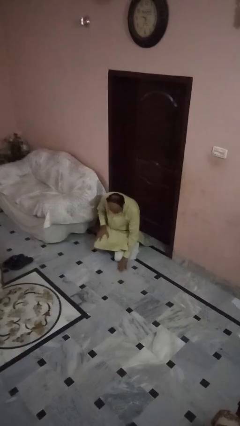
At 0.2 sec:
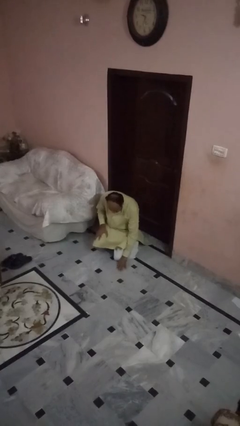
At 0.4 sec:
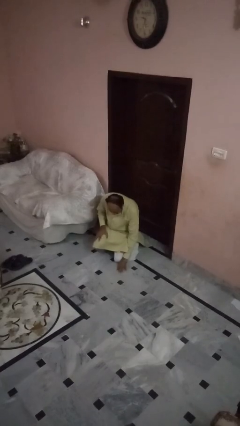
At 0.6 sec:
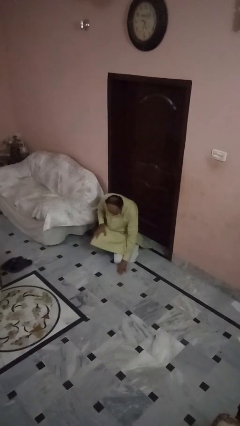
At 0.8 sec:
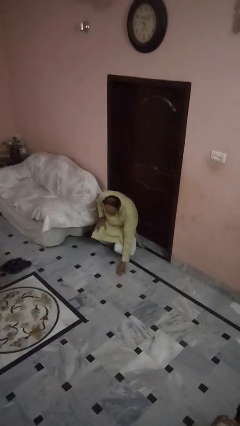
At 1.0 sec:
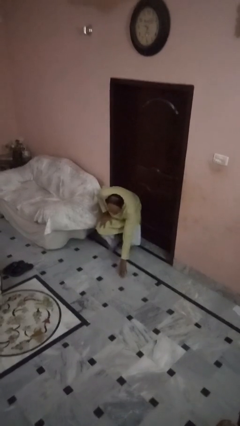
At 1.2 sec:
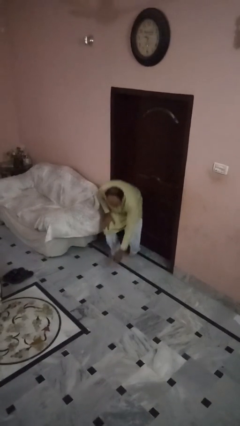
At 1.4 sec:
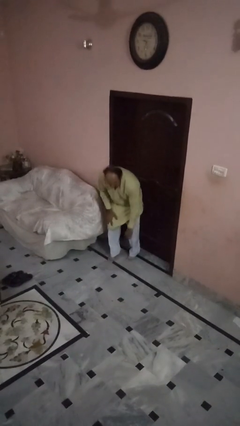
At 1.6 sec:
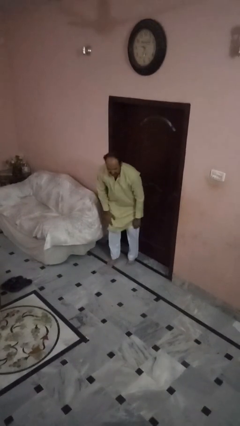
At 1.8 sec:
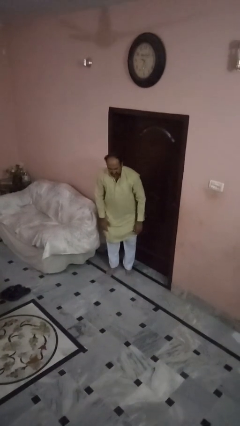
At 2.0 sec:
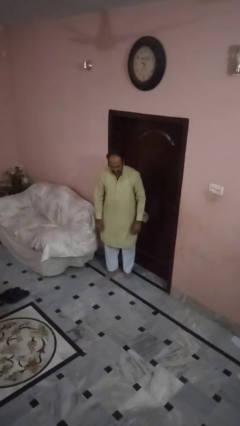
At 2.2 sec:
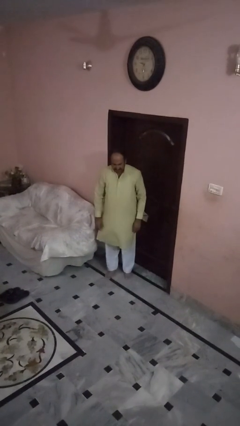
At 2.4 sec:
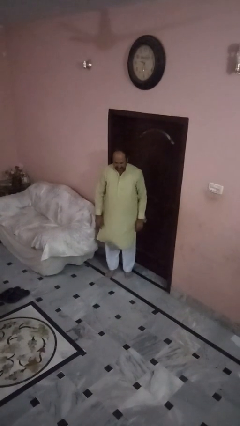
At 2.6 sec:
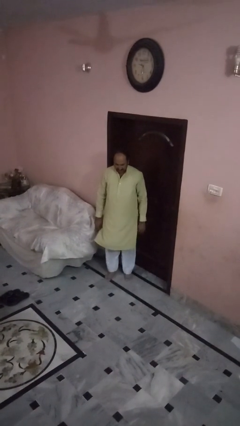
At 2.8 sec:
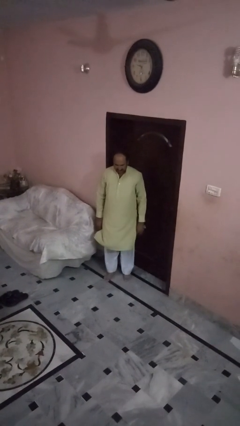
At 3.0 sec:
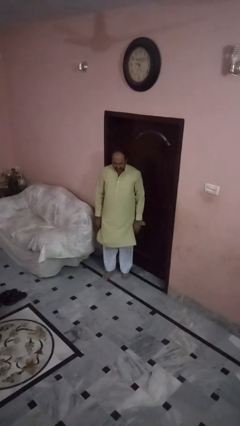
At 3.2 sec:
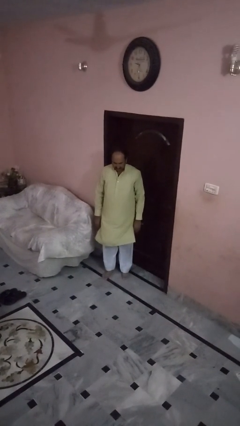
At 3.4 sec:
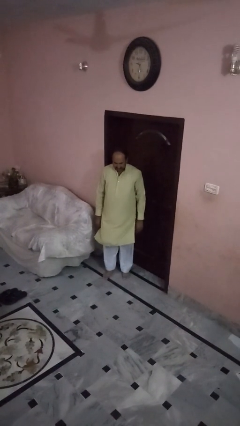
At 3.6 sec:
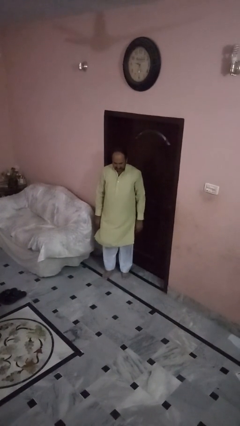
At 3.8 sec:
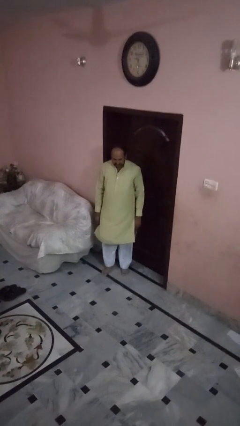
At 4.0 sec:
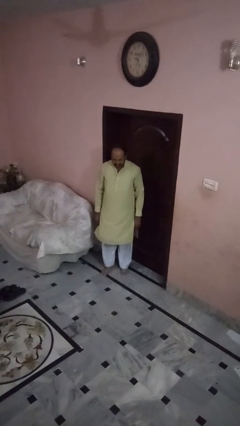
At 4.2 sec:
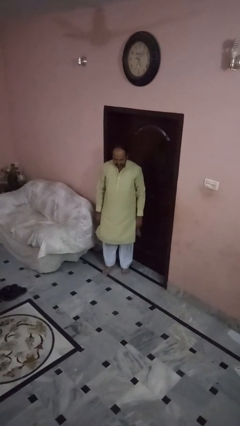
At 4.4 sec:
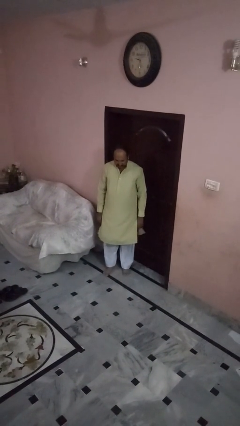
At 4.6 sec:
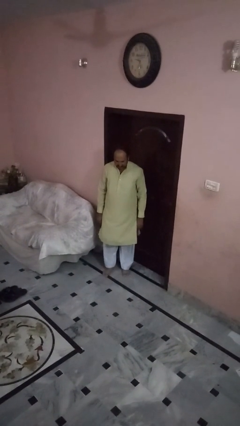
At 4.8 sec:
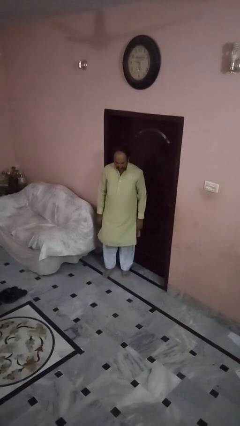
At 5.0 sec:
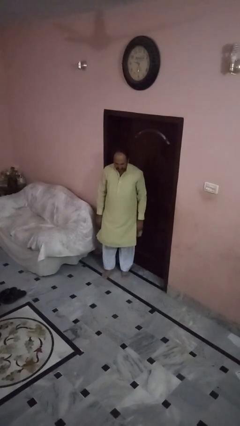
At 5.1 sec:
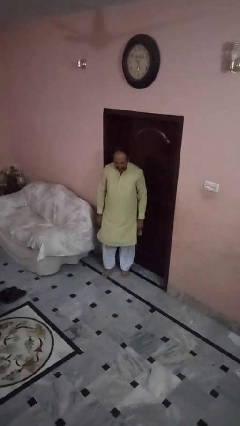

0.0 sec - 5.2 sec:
person stands up from floor

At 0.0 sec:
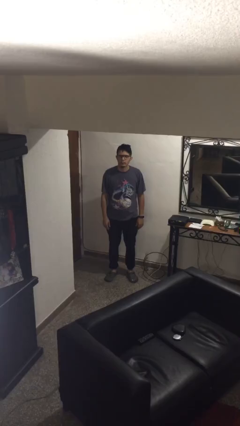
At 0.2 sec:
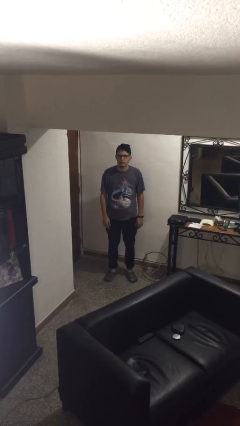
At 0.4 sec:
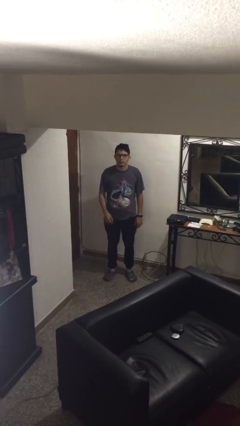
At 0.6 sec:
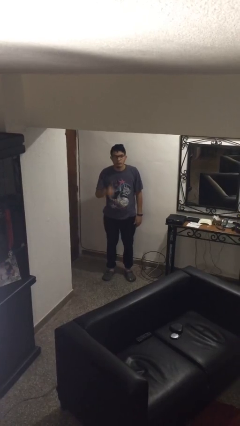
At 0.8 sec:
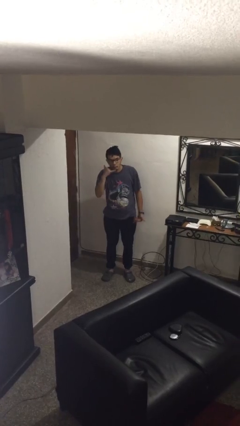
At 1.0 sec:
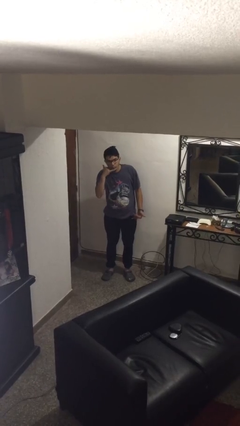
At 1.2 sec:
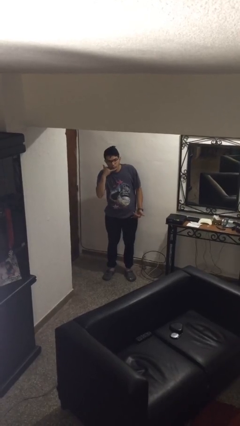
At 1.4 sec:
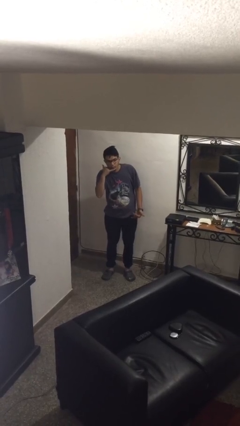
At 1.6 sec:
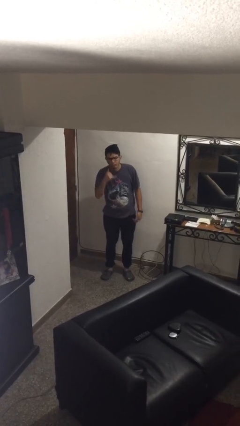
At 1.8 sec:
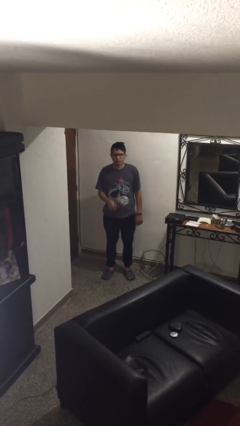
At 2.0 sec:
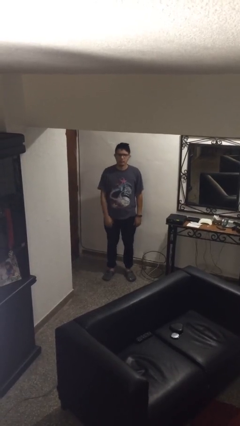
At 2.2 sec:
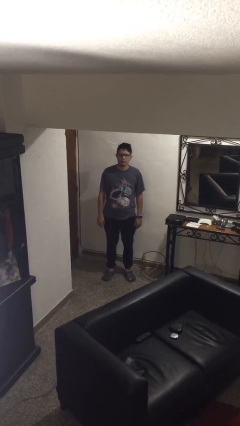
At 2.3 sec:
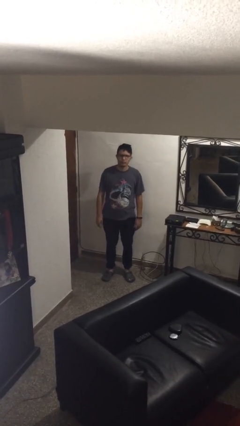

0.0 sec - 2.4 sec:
person gestures call me

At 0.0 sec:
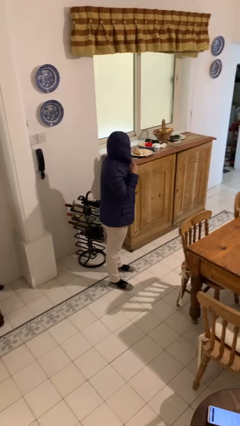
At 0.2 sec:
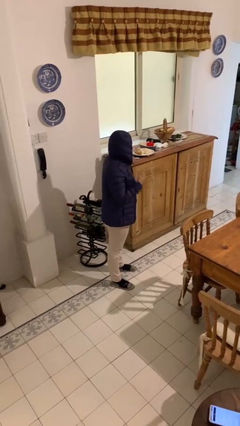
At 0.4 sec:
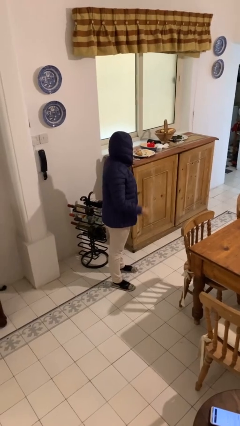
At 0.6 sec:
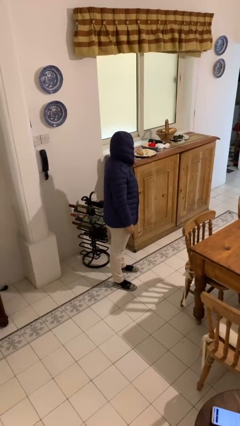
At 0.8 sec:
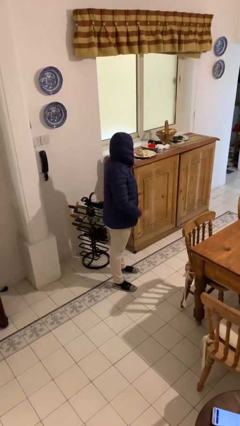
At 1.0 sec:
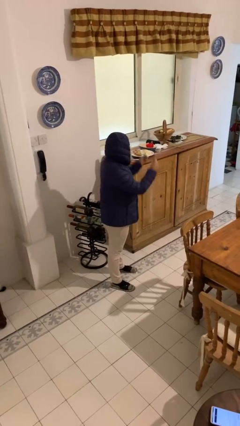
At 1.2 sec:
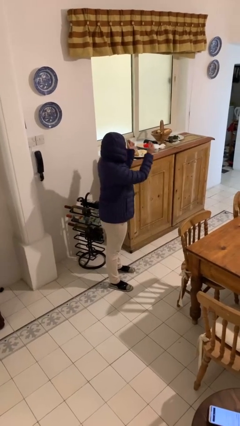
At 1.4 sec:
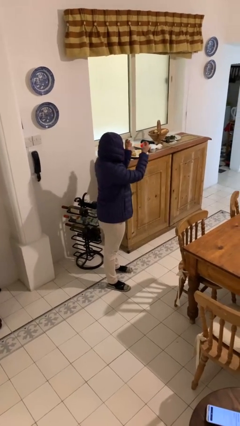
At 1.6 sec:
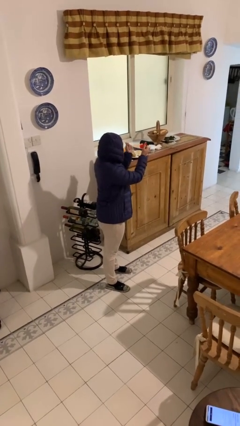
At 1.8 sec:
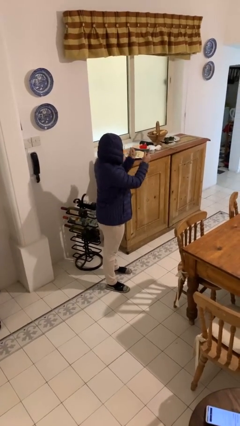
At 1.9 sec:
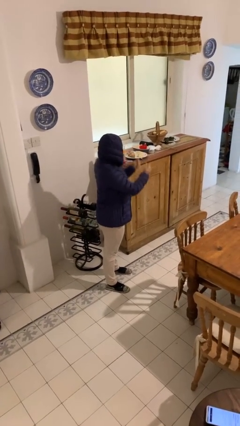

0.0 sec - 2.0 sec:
person snaps fingers

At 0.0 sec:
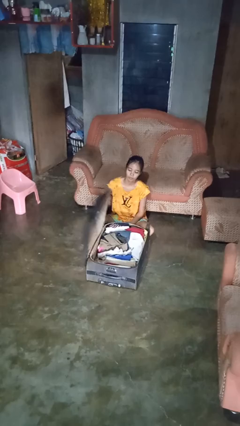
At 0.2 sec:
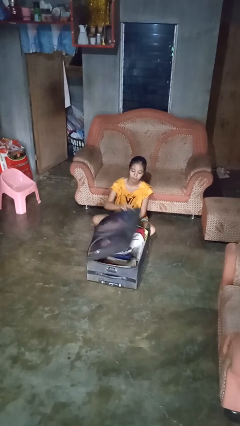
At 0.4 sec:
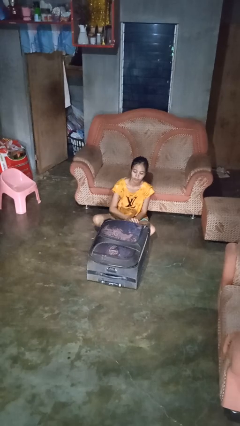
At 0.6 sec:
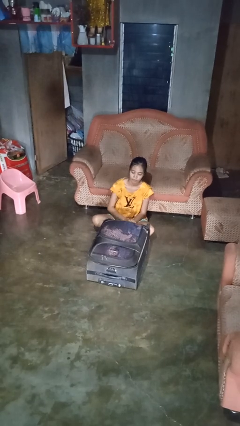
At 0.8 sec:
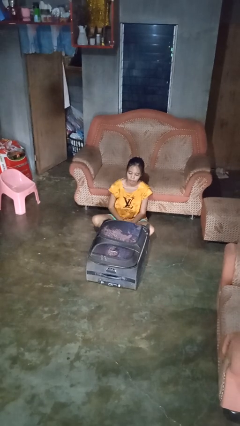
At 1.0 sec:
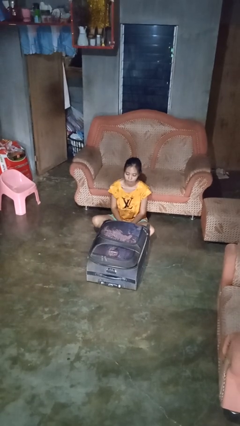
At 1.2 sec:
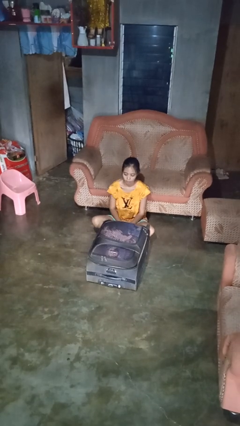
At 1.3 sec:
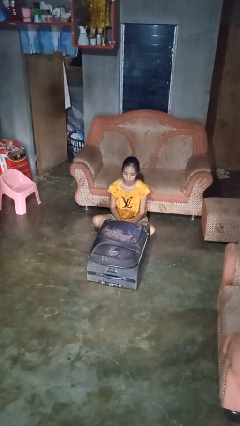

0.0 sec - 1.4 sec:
person closes suitcase

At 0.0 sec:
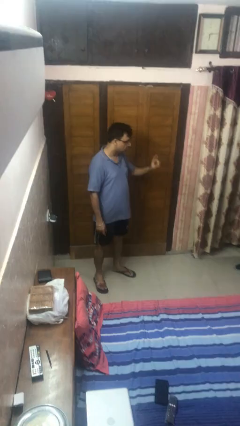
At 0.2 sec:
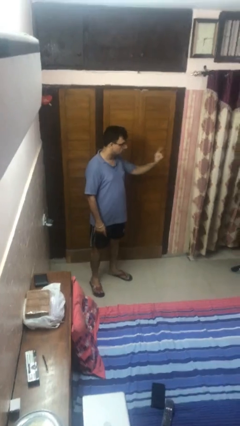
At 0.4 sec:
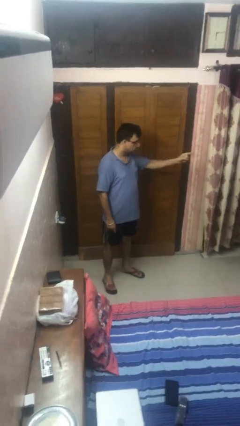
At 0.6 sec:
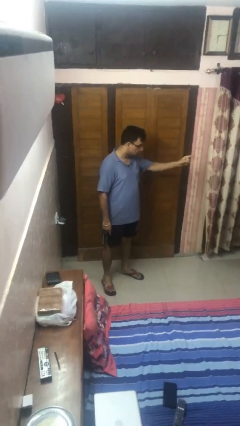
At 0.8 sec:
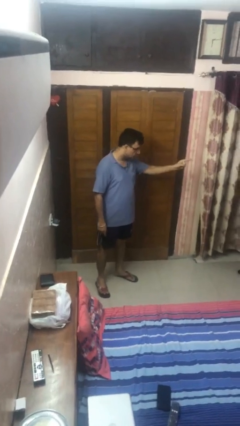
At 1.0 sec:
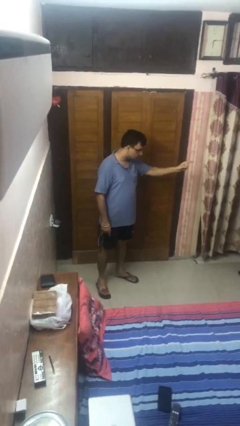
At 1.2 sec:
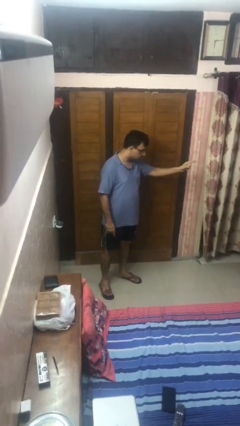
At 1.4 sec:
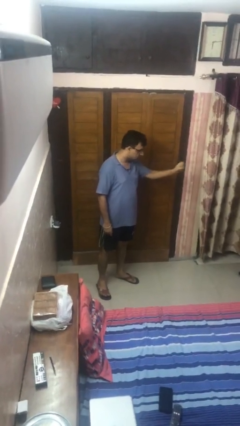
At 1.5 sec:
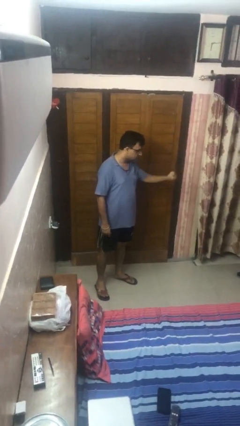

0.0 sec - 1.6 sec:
person points at person

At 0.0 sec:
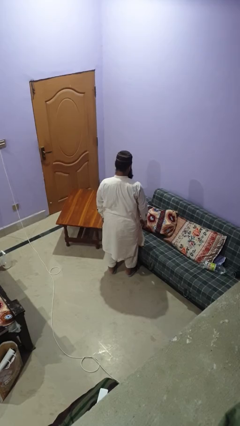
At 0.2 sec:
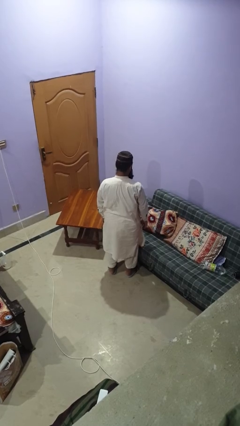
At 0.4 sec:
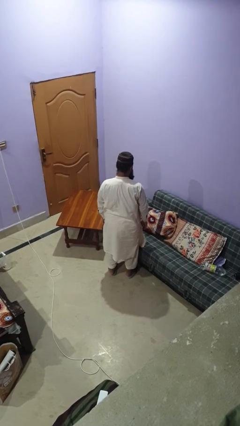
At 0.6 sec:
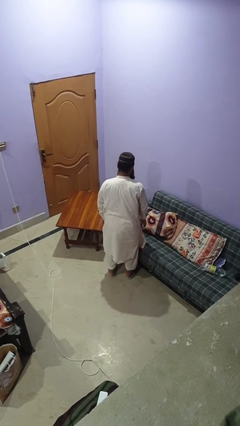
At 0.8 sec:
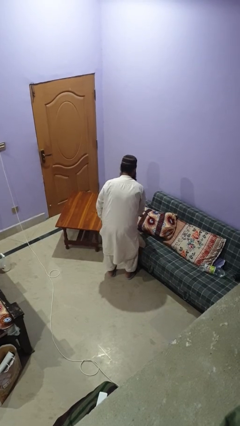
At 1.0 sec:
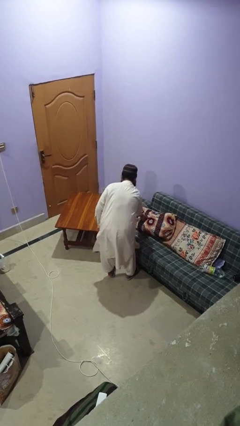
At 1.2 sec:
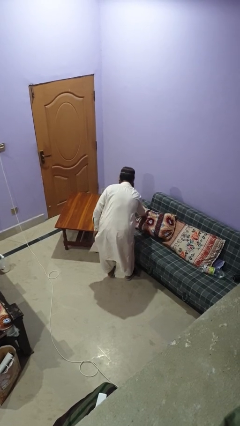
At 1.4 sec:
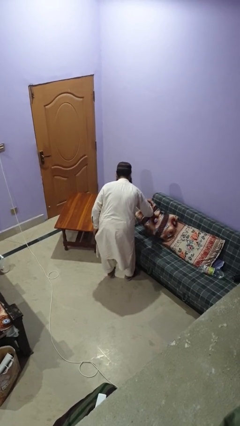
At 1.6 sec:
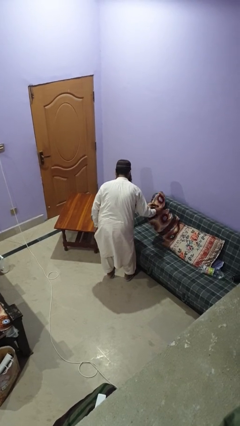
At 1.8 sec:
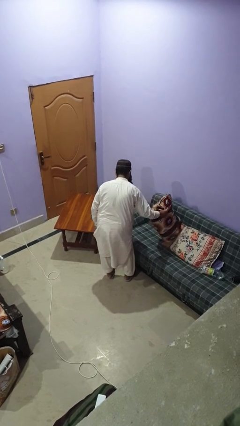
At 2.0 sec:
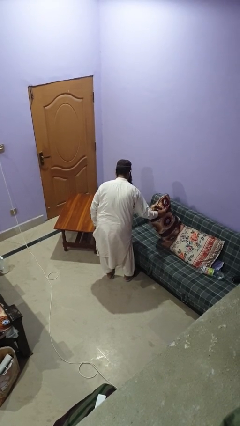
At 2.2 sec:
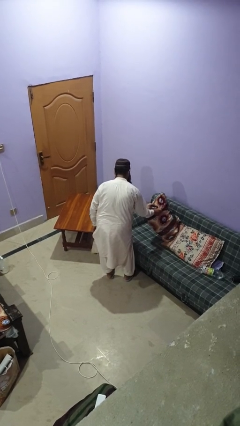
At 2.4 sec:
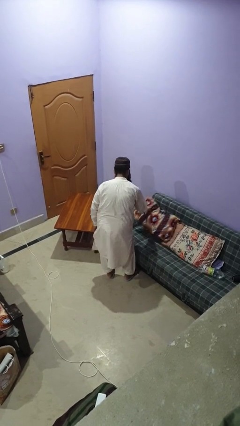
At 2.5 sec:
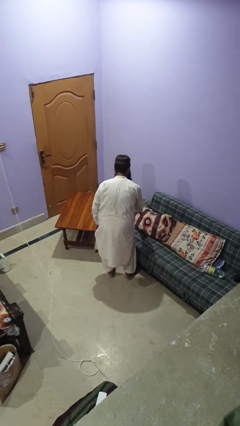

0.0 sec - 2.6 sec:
person searches in couch

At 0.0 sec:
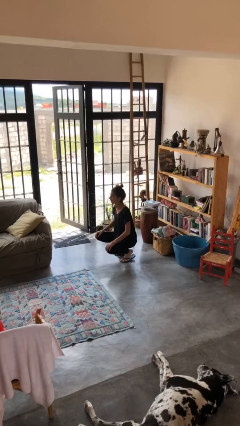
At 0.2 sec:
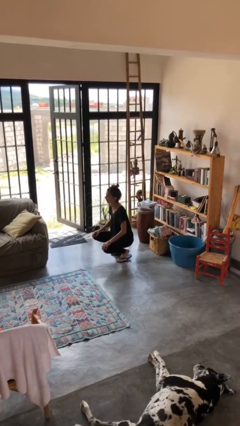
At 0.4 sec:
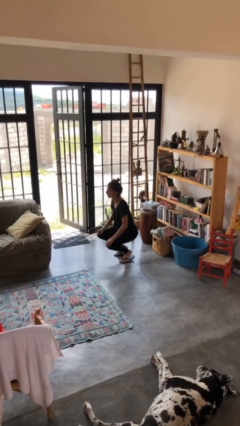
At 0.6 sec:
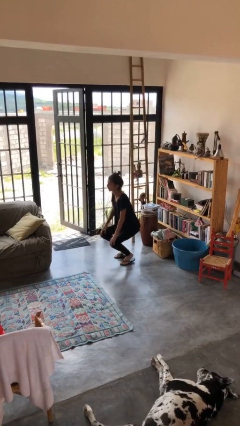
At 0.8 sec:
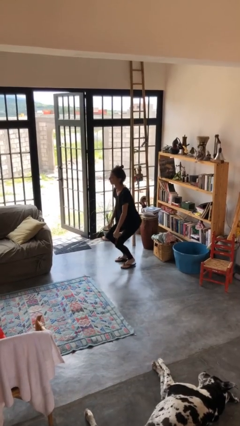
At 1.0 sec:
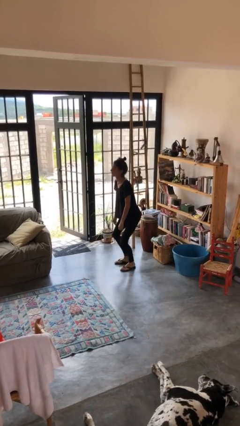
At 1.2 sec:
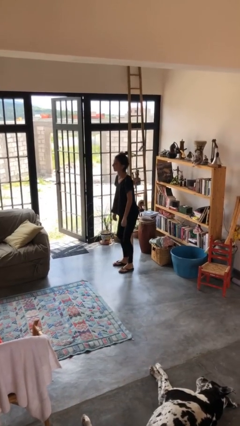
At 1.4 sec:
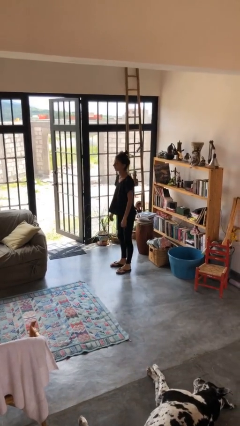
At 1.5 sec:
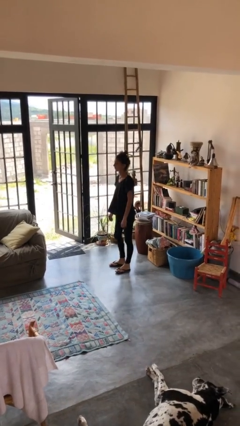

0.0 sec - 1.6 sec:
person stands up
